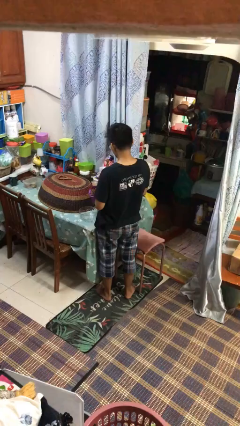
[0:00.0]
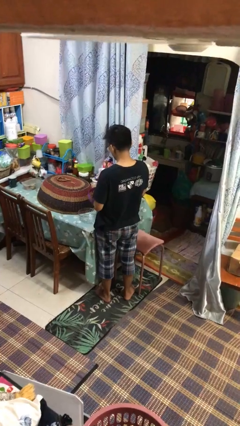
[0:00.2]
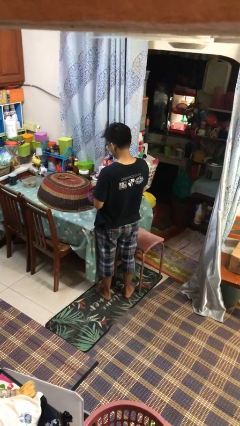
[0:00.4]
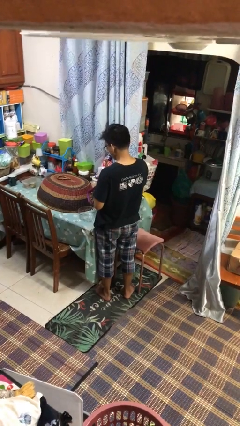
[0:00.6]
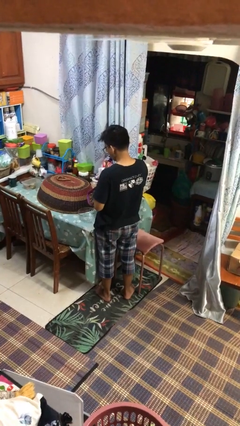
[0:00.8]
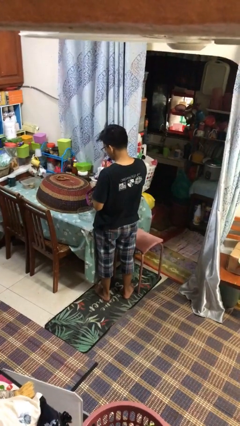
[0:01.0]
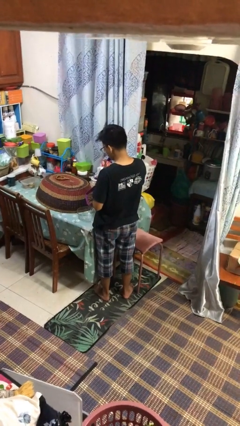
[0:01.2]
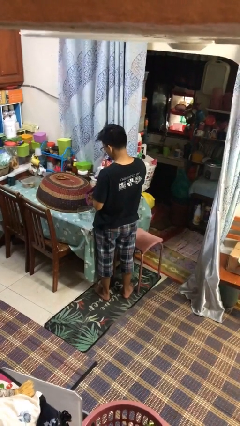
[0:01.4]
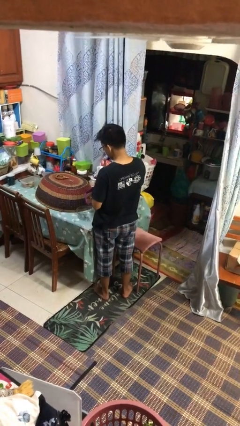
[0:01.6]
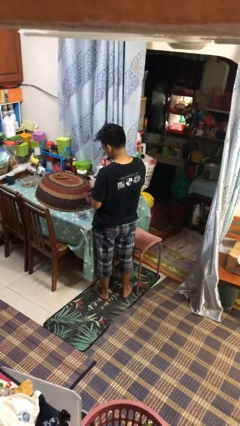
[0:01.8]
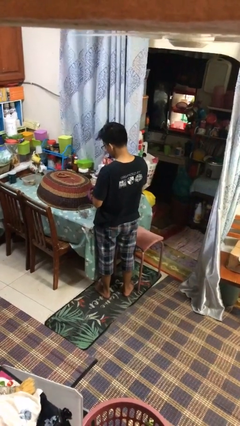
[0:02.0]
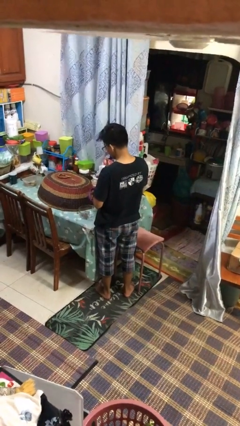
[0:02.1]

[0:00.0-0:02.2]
person pours into bowl

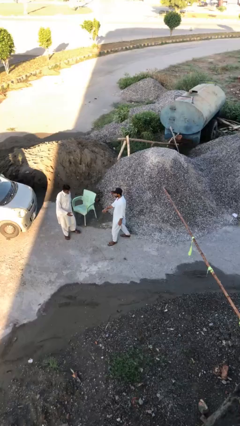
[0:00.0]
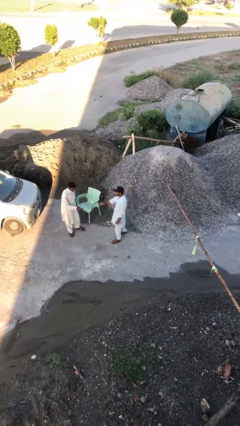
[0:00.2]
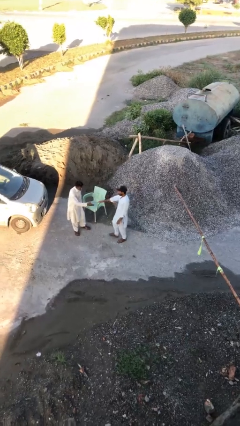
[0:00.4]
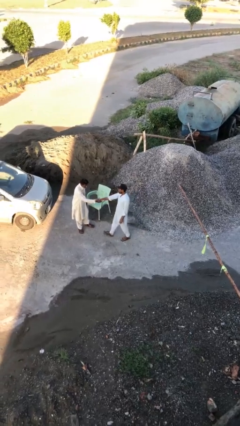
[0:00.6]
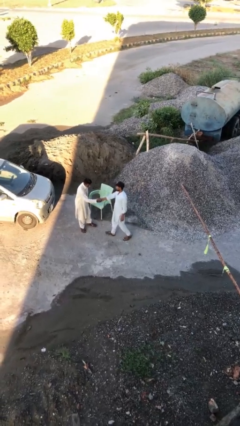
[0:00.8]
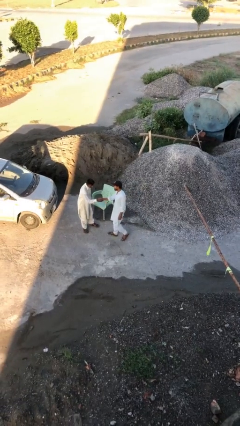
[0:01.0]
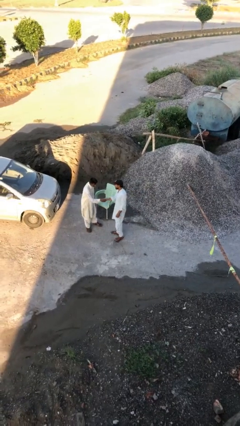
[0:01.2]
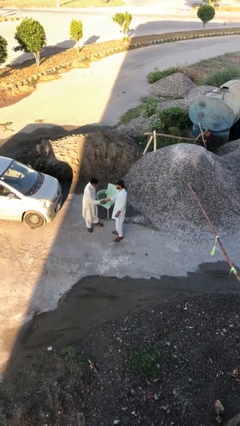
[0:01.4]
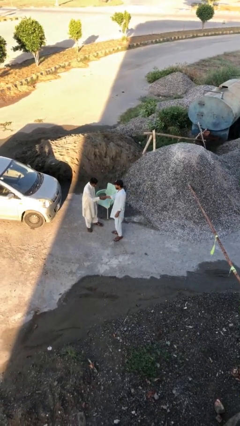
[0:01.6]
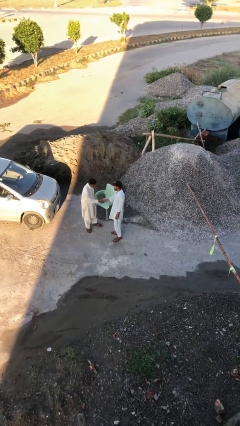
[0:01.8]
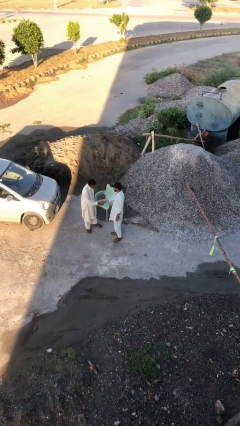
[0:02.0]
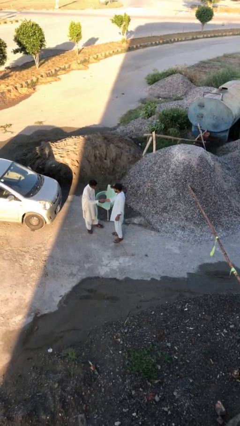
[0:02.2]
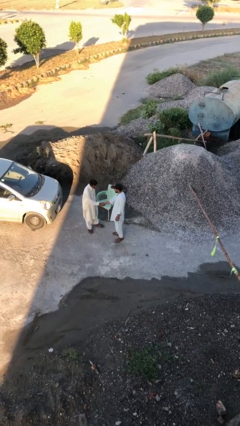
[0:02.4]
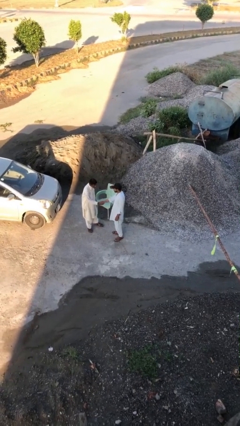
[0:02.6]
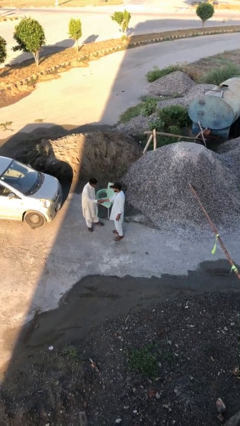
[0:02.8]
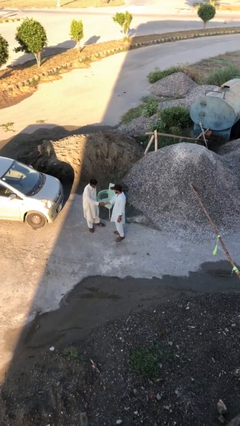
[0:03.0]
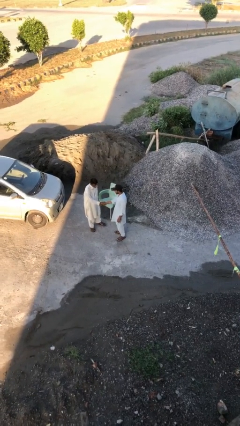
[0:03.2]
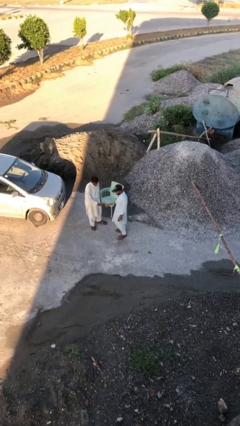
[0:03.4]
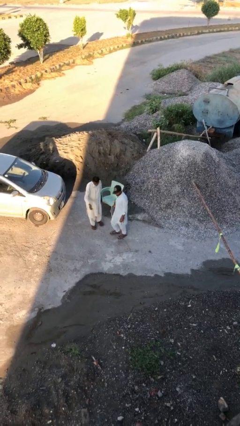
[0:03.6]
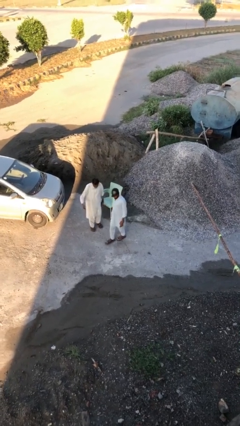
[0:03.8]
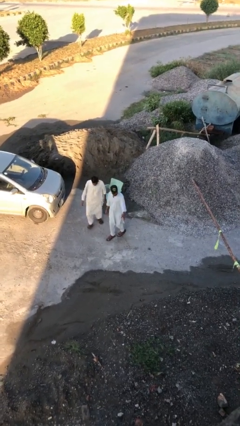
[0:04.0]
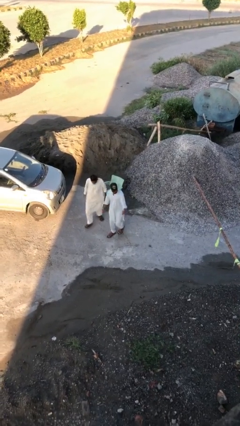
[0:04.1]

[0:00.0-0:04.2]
person shakes hand

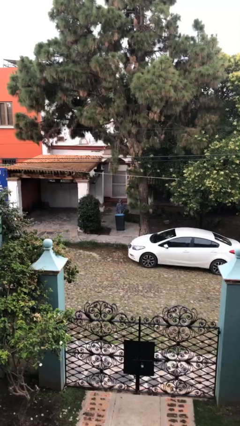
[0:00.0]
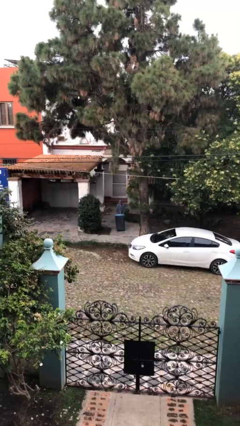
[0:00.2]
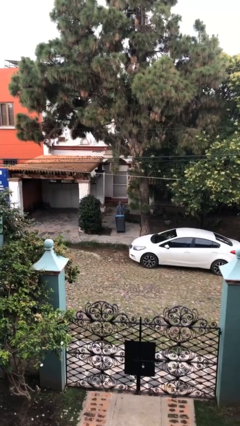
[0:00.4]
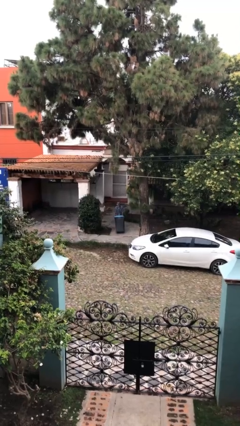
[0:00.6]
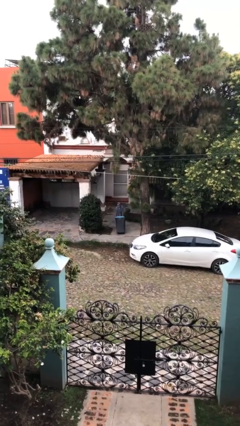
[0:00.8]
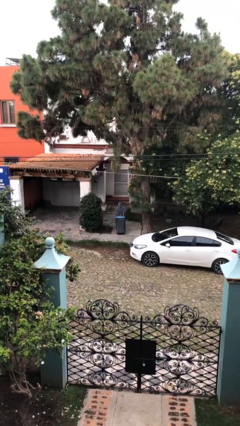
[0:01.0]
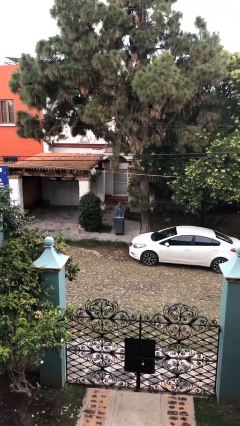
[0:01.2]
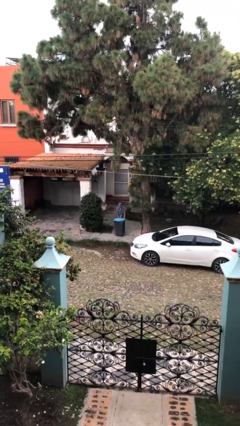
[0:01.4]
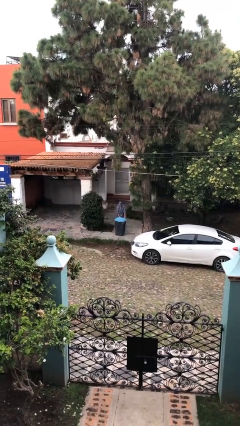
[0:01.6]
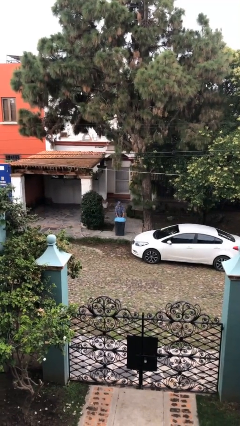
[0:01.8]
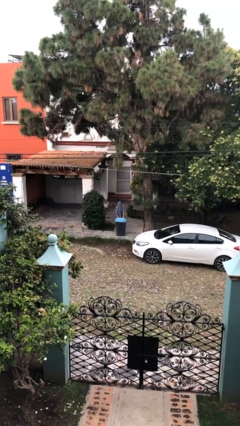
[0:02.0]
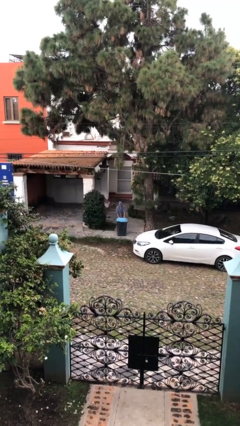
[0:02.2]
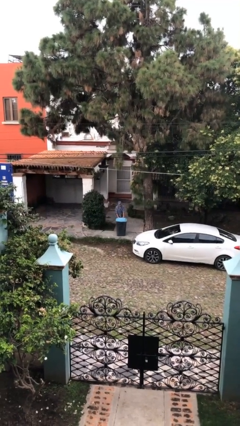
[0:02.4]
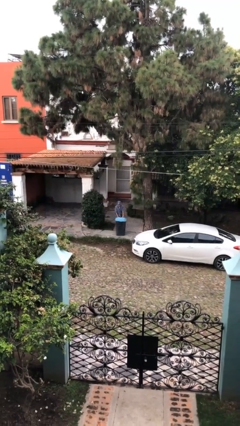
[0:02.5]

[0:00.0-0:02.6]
person pushes wheeled trashcan

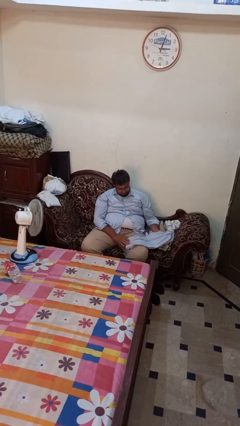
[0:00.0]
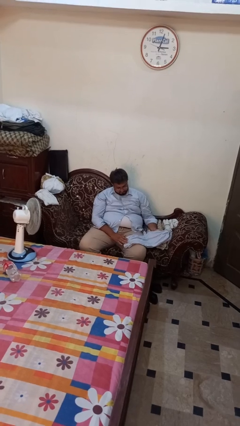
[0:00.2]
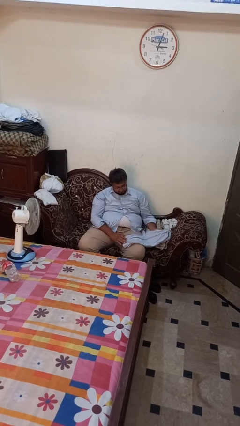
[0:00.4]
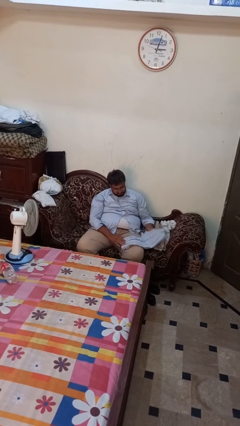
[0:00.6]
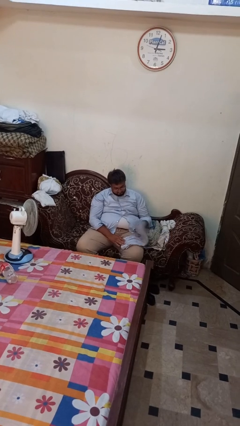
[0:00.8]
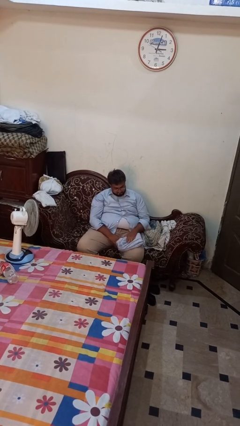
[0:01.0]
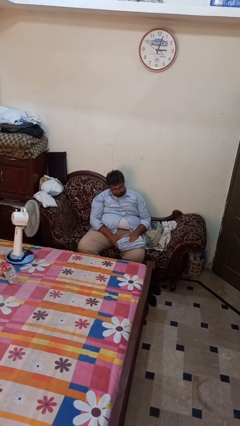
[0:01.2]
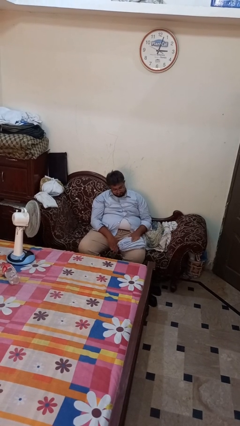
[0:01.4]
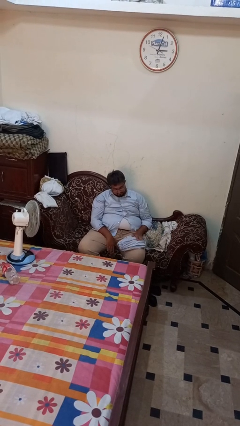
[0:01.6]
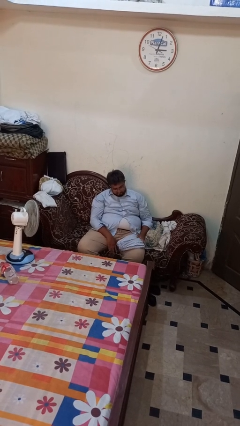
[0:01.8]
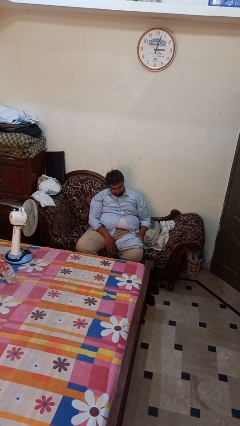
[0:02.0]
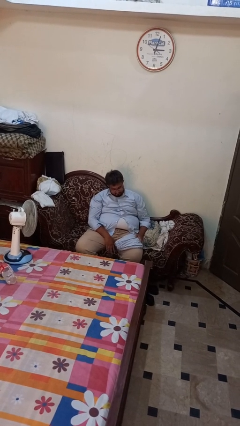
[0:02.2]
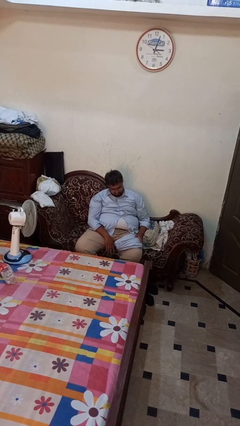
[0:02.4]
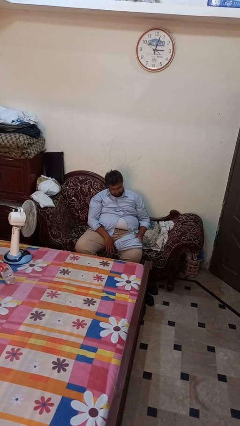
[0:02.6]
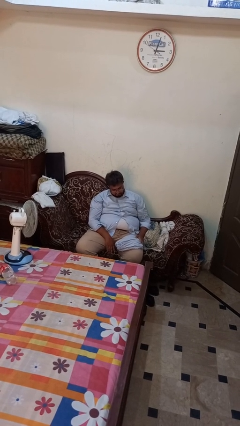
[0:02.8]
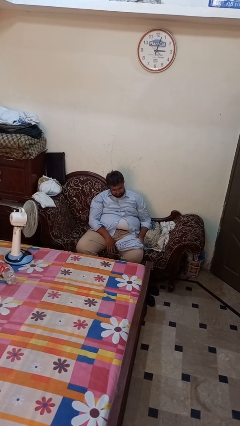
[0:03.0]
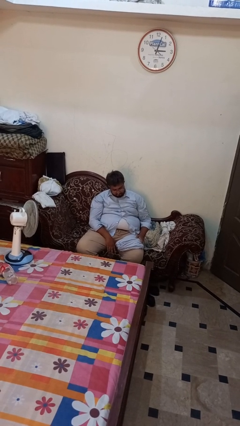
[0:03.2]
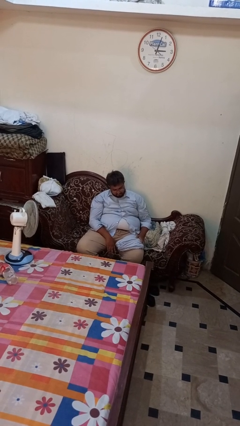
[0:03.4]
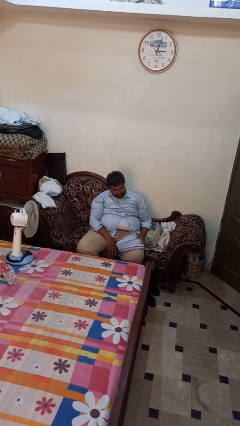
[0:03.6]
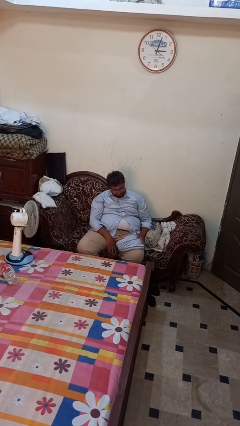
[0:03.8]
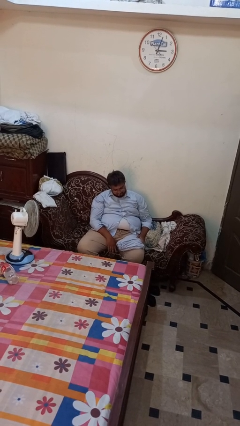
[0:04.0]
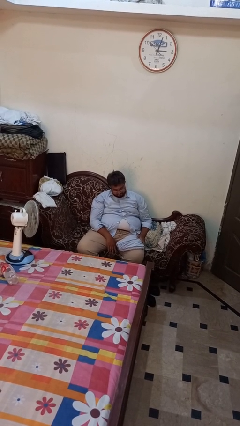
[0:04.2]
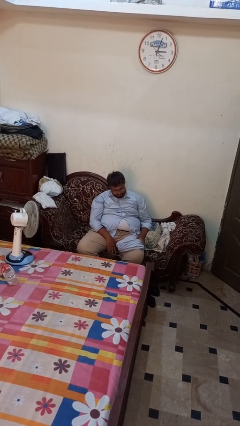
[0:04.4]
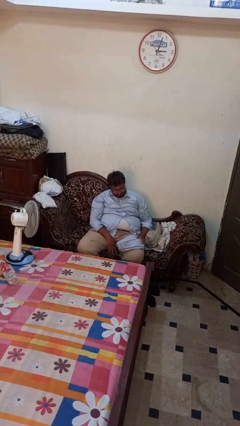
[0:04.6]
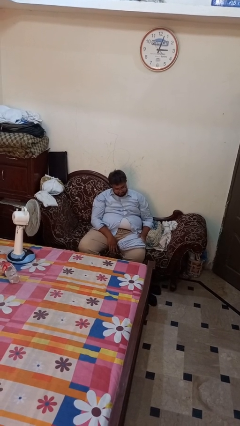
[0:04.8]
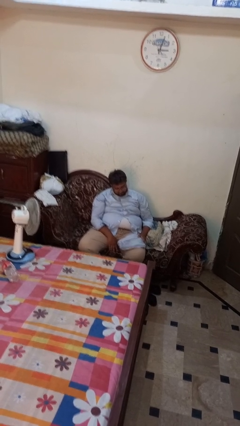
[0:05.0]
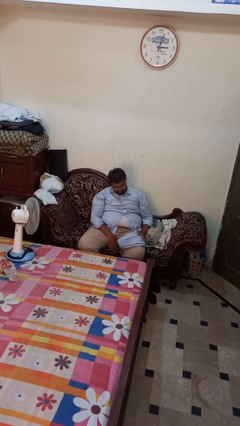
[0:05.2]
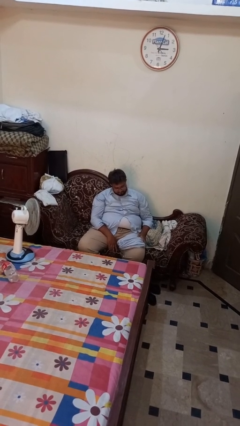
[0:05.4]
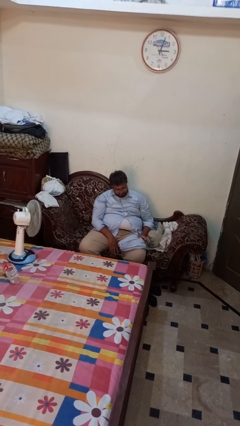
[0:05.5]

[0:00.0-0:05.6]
person folds pants

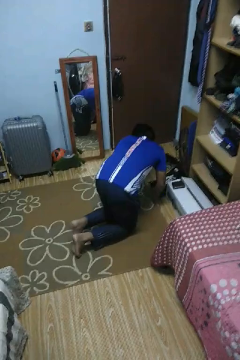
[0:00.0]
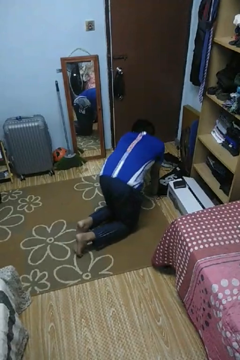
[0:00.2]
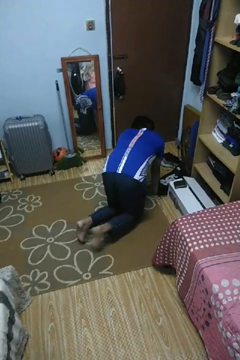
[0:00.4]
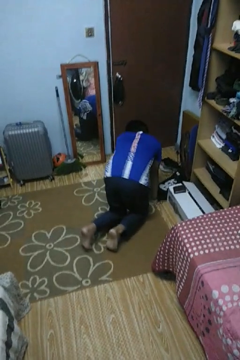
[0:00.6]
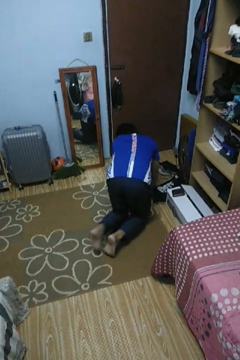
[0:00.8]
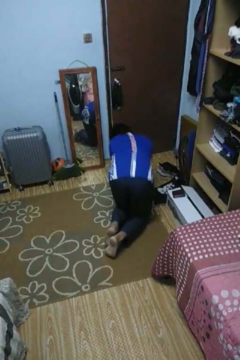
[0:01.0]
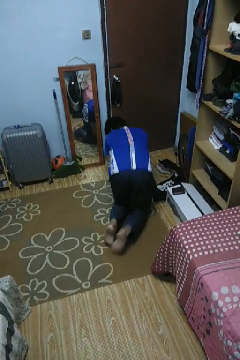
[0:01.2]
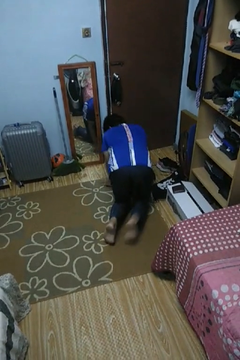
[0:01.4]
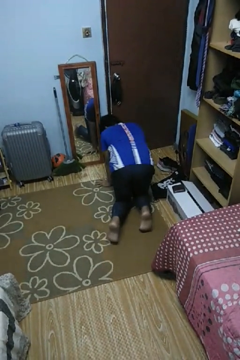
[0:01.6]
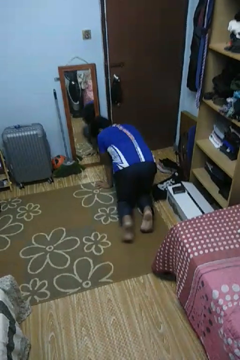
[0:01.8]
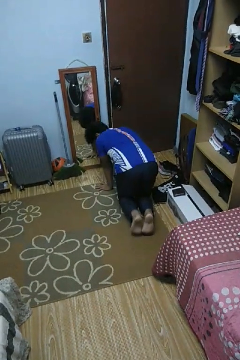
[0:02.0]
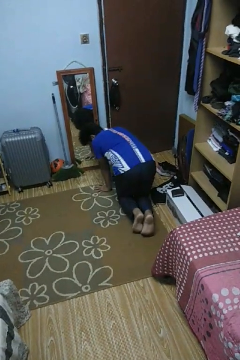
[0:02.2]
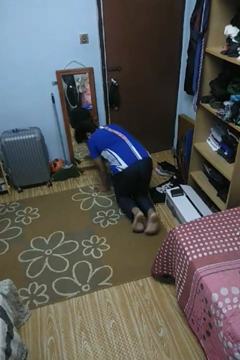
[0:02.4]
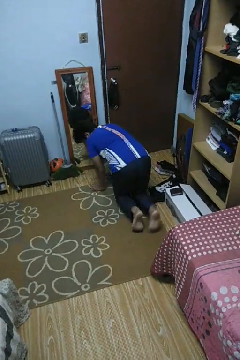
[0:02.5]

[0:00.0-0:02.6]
person crawls

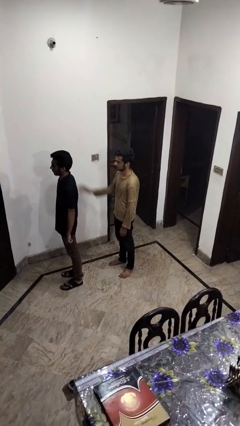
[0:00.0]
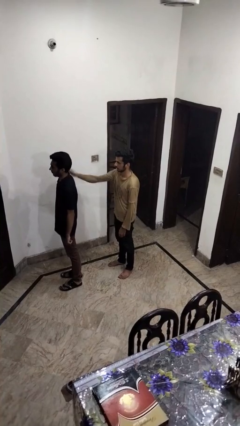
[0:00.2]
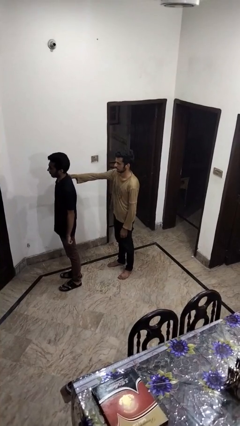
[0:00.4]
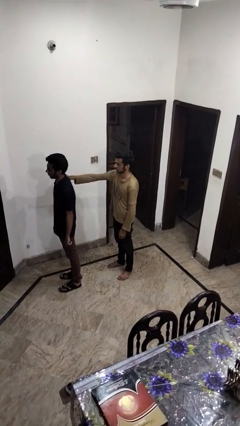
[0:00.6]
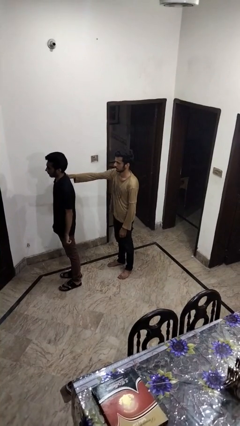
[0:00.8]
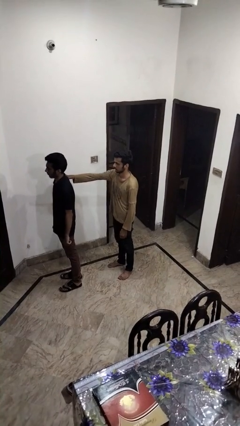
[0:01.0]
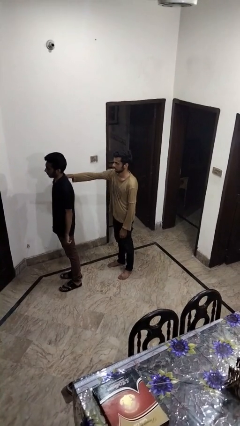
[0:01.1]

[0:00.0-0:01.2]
person grabs person by shoulder
